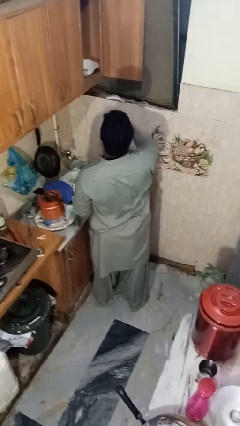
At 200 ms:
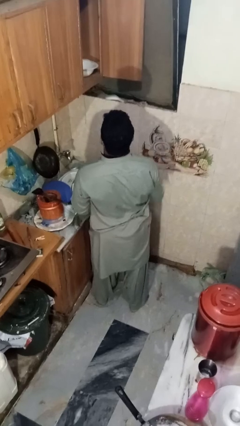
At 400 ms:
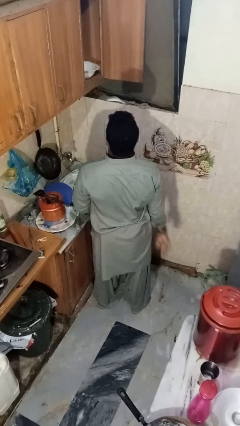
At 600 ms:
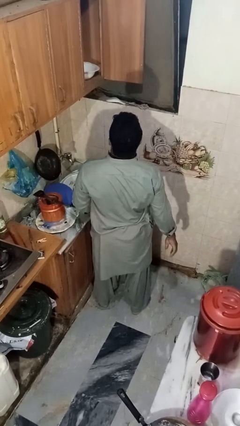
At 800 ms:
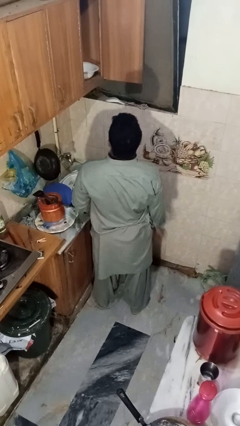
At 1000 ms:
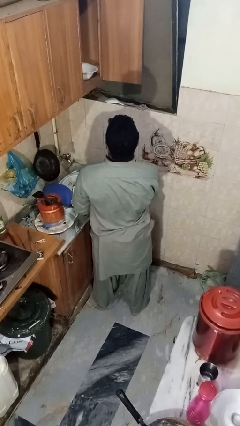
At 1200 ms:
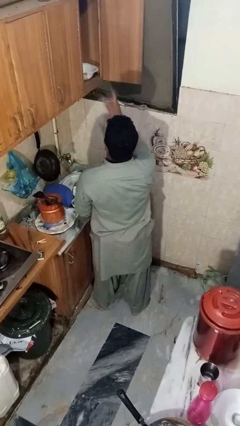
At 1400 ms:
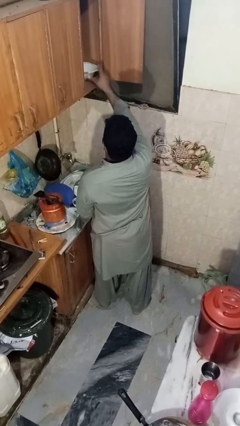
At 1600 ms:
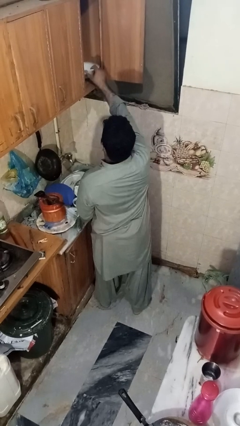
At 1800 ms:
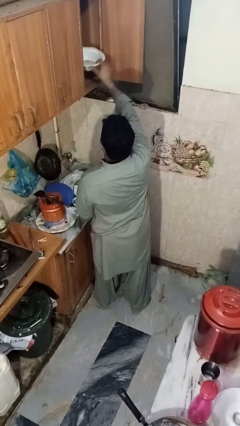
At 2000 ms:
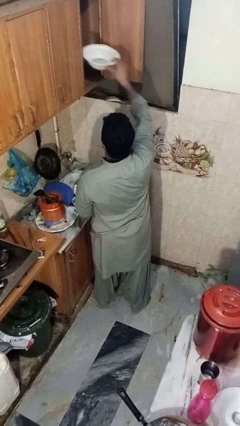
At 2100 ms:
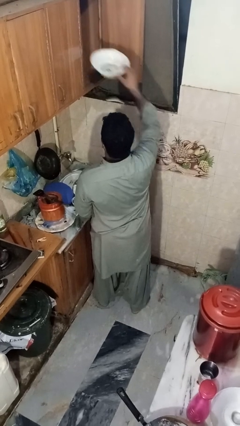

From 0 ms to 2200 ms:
person takes object from cabinet

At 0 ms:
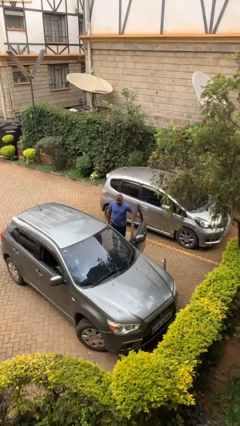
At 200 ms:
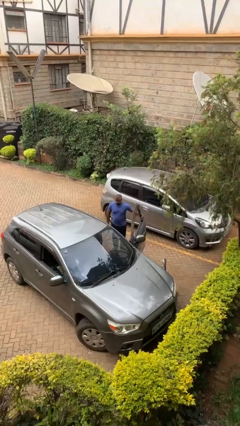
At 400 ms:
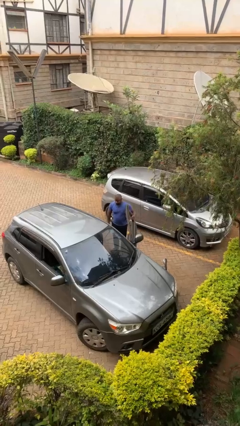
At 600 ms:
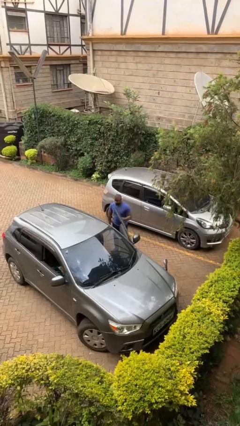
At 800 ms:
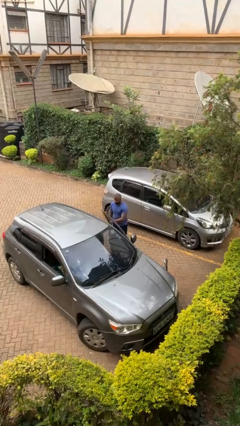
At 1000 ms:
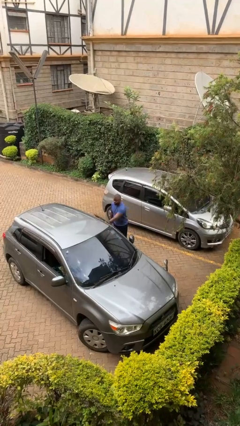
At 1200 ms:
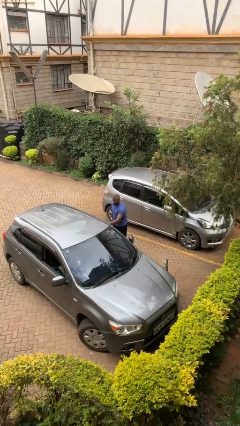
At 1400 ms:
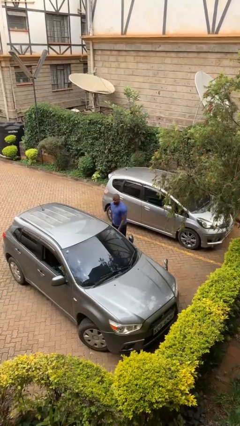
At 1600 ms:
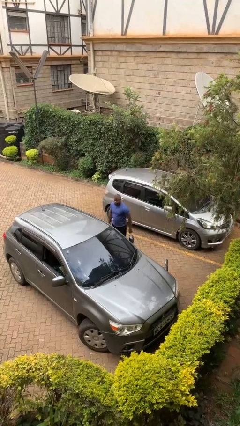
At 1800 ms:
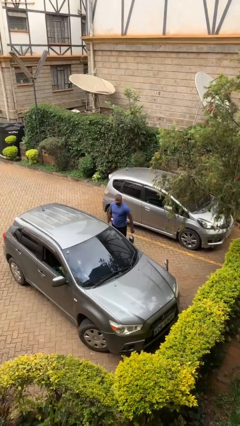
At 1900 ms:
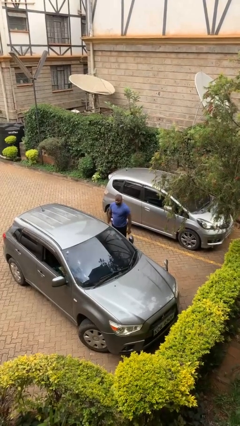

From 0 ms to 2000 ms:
person closes car door

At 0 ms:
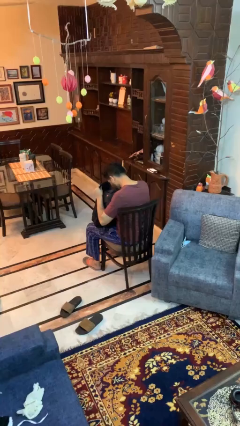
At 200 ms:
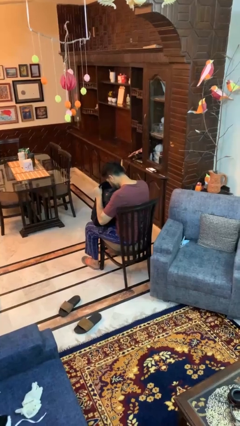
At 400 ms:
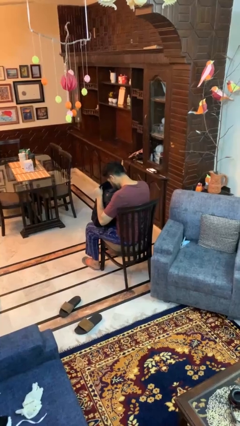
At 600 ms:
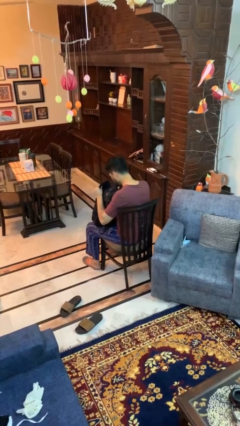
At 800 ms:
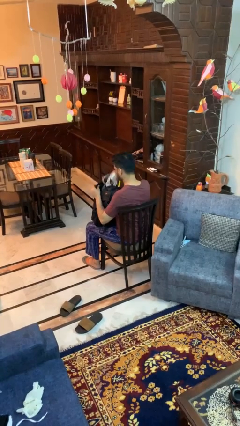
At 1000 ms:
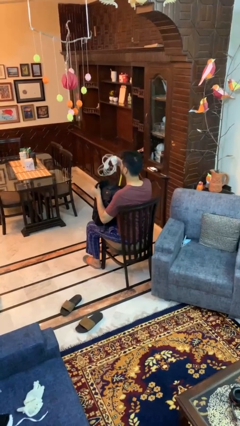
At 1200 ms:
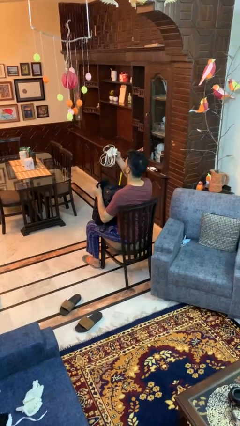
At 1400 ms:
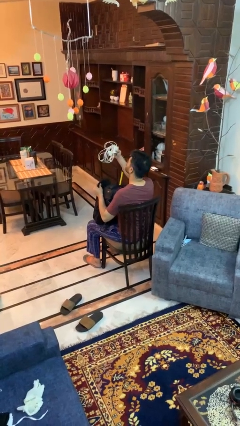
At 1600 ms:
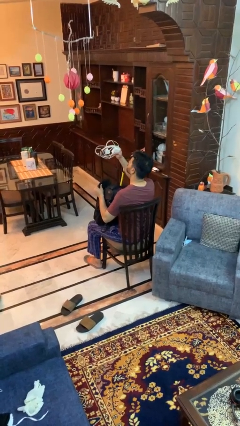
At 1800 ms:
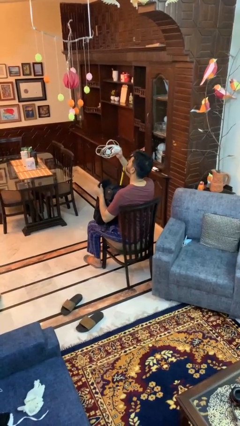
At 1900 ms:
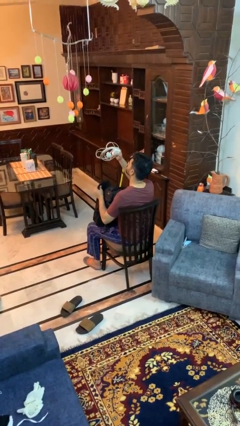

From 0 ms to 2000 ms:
person takes object from backpack

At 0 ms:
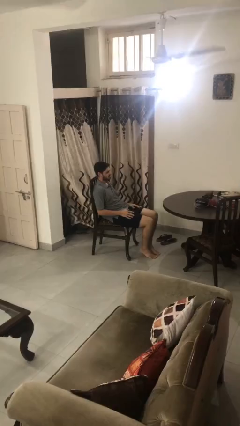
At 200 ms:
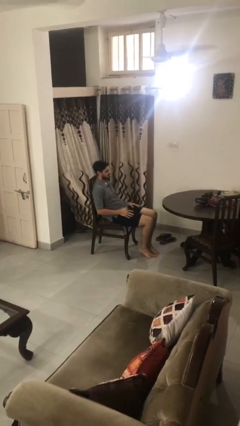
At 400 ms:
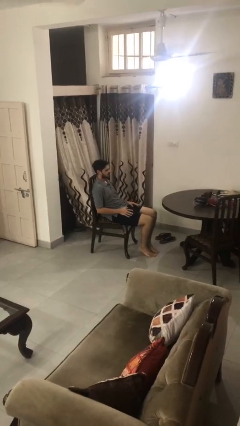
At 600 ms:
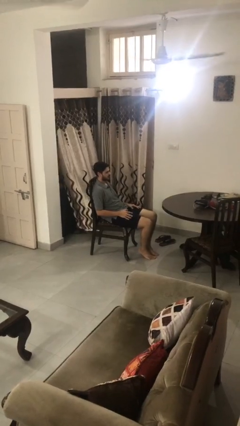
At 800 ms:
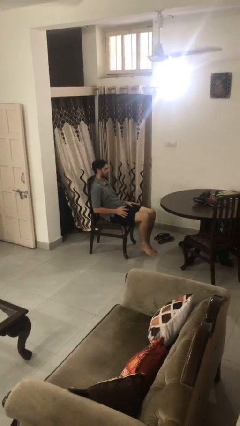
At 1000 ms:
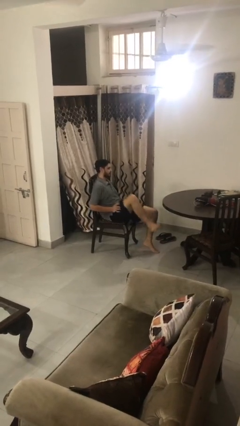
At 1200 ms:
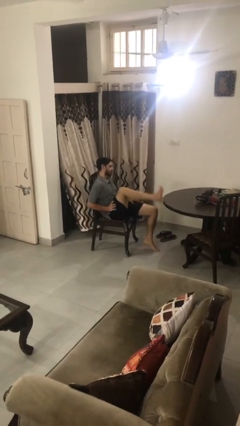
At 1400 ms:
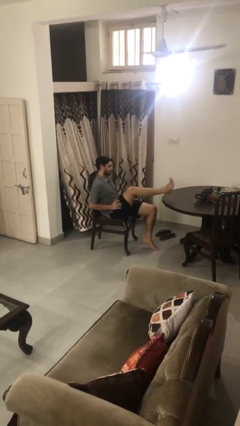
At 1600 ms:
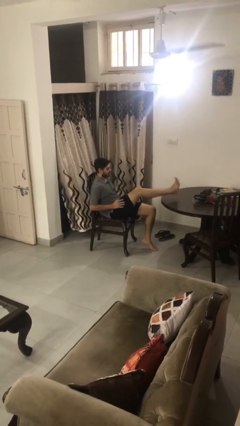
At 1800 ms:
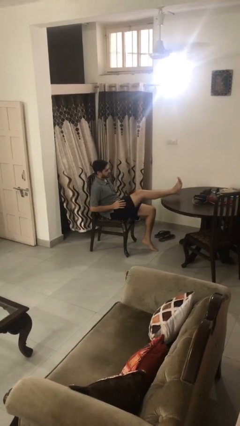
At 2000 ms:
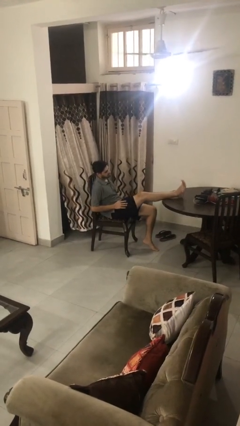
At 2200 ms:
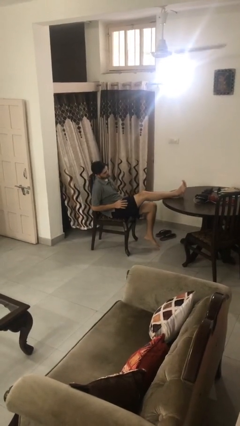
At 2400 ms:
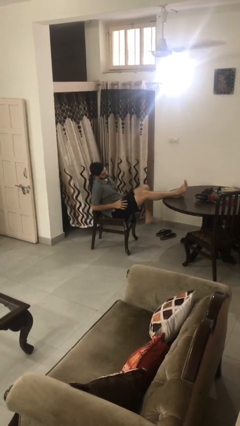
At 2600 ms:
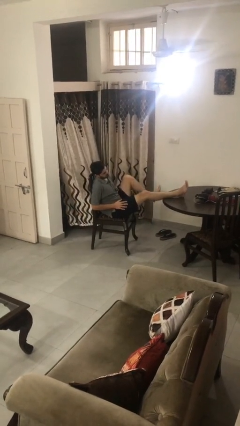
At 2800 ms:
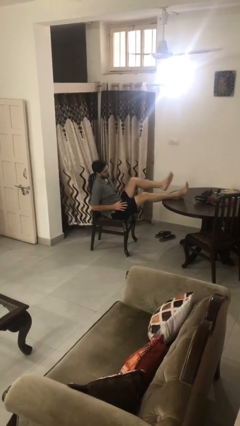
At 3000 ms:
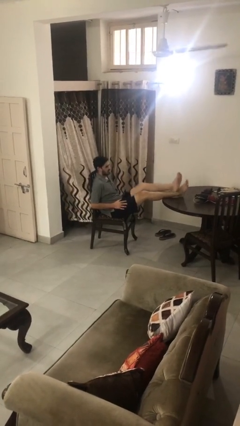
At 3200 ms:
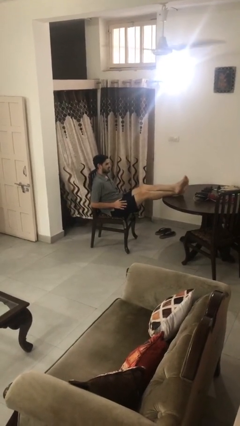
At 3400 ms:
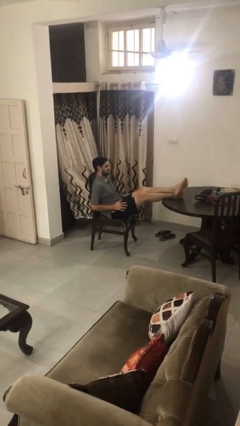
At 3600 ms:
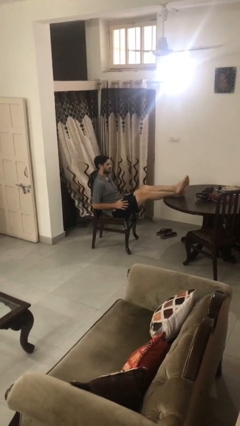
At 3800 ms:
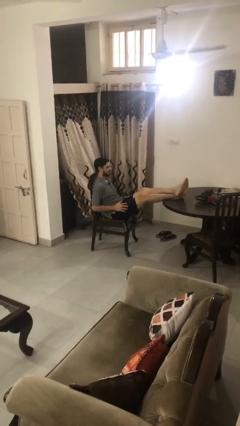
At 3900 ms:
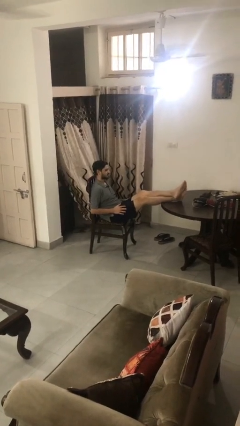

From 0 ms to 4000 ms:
person puts feet up

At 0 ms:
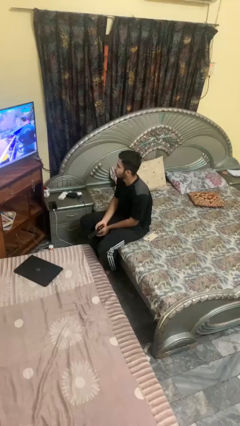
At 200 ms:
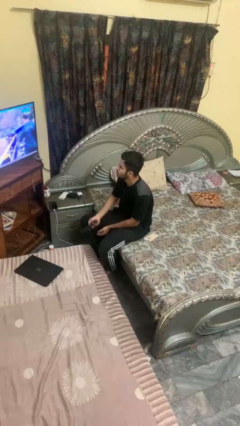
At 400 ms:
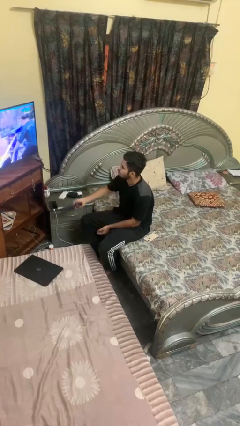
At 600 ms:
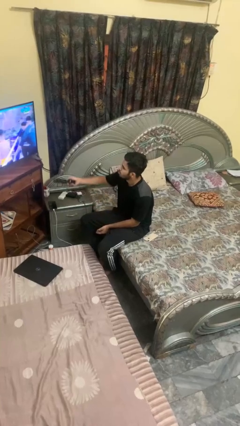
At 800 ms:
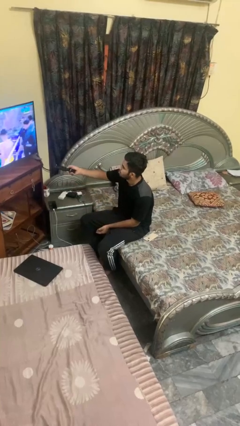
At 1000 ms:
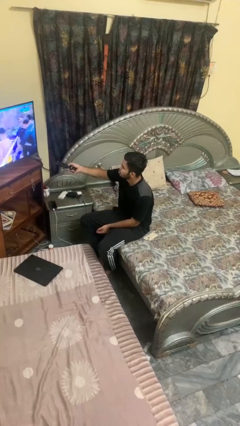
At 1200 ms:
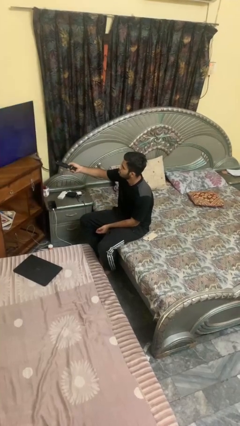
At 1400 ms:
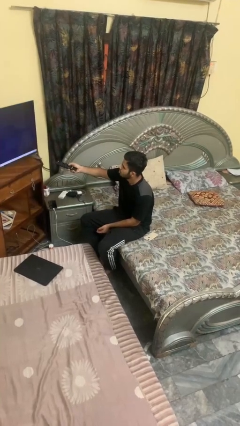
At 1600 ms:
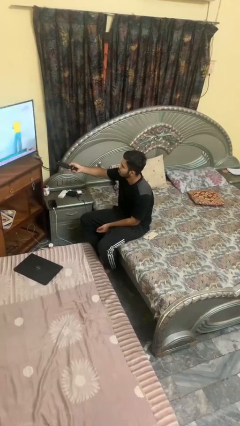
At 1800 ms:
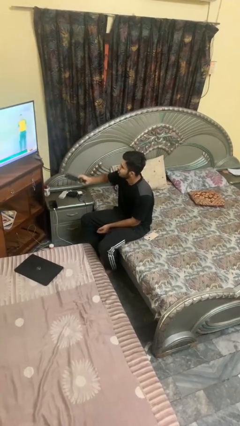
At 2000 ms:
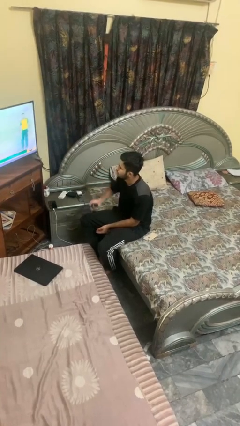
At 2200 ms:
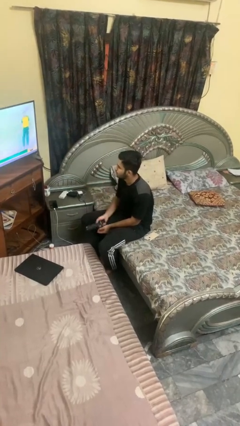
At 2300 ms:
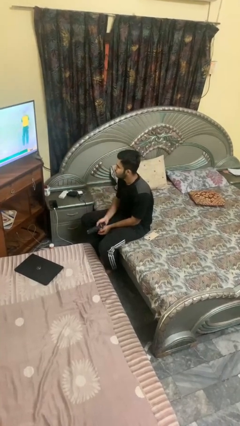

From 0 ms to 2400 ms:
person uses television remote

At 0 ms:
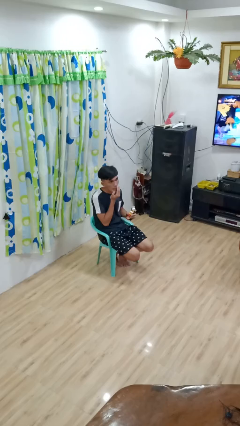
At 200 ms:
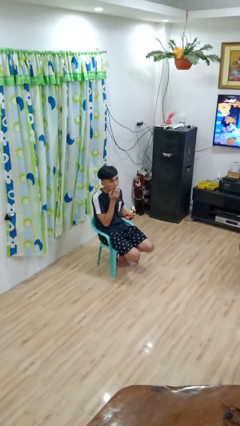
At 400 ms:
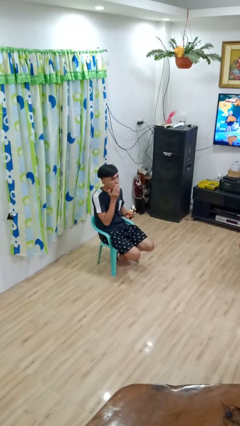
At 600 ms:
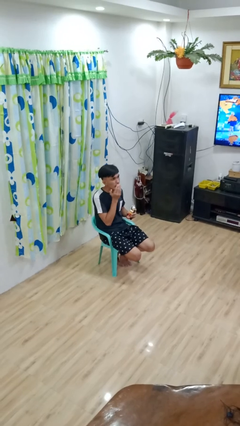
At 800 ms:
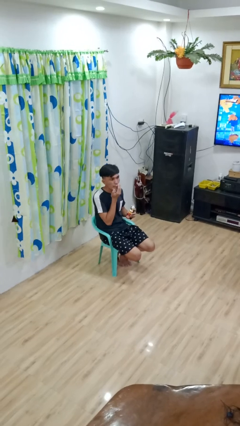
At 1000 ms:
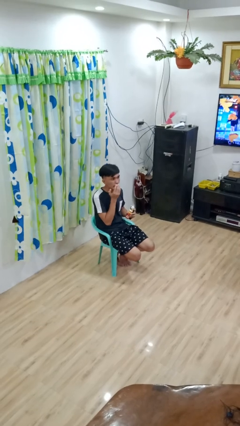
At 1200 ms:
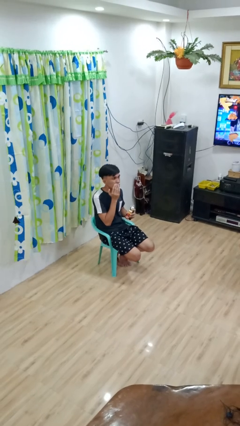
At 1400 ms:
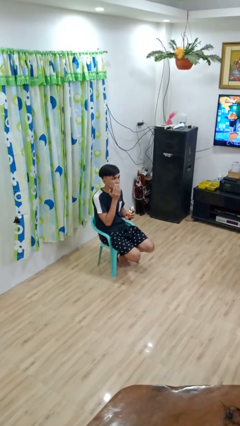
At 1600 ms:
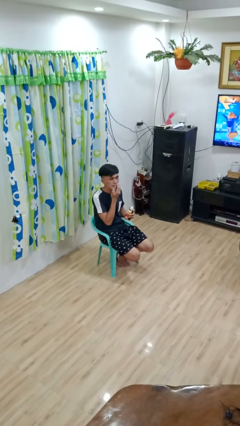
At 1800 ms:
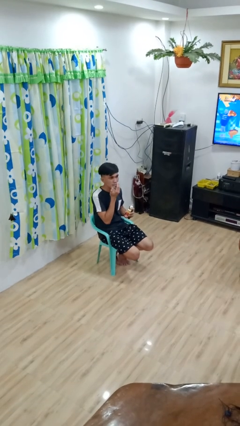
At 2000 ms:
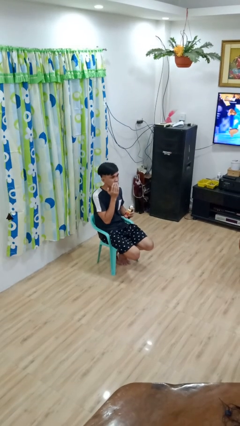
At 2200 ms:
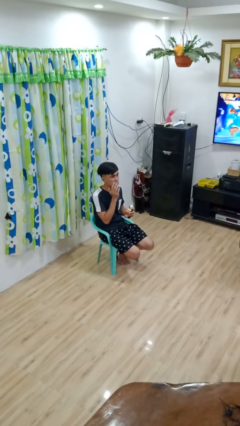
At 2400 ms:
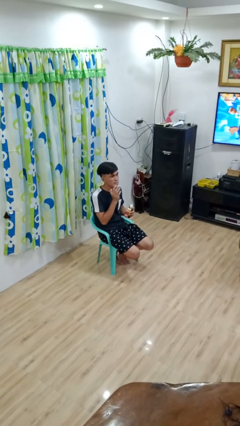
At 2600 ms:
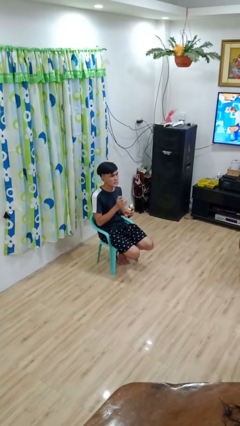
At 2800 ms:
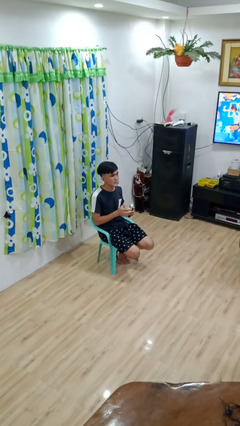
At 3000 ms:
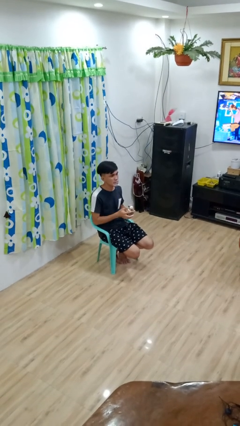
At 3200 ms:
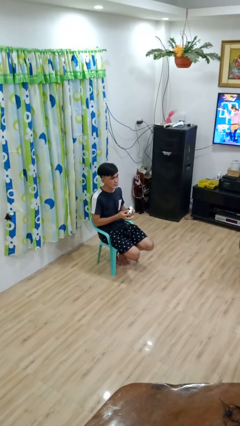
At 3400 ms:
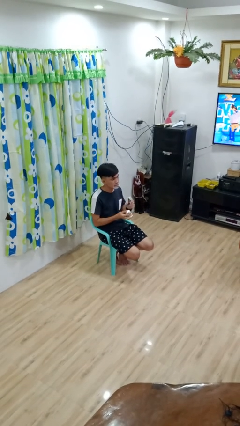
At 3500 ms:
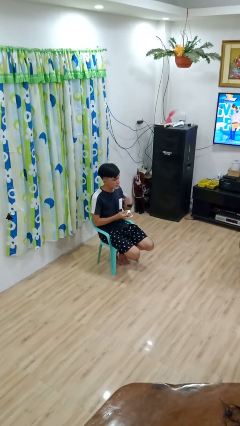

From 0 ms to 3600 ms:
person applies shaving cream

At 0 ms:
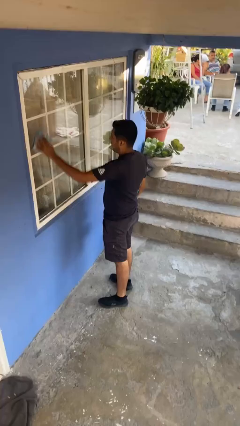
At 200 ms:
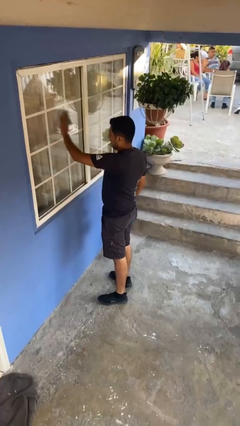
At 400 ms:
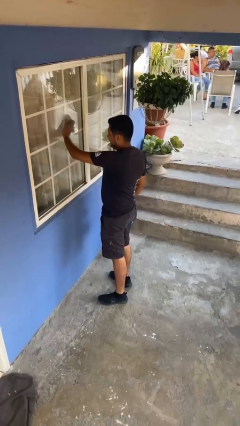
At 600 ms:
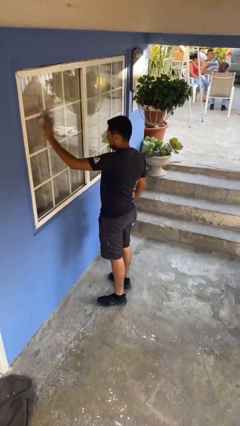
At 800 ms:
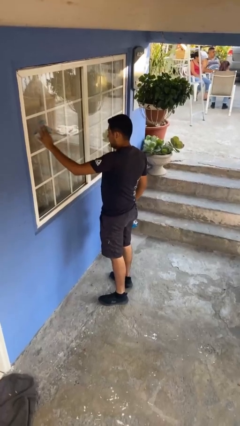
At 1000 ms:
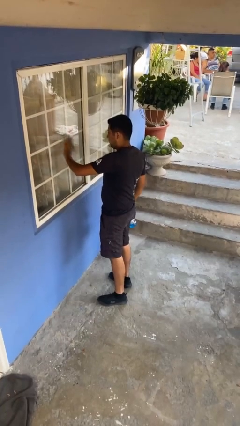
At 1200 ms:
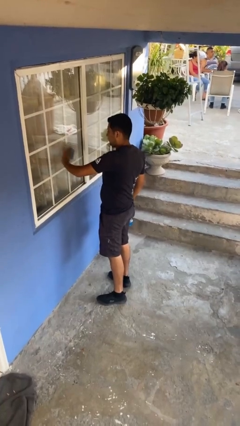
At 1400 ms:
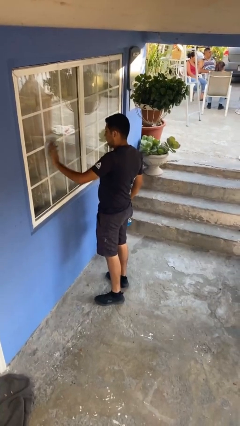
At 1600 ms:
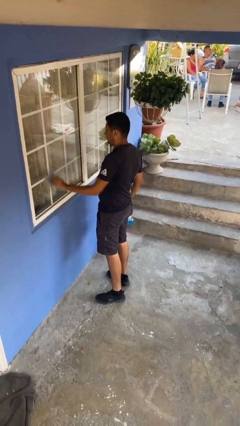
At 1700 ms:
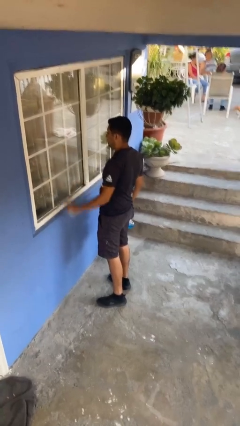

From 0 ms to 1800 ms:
person washes window
